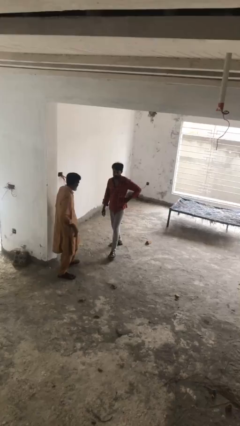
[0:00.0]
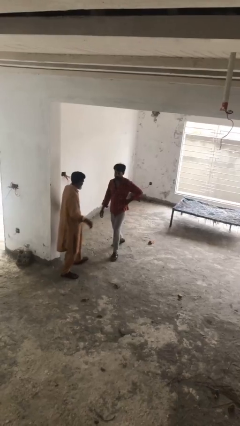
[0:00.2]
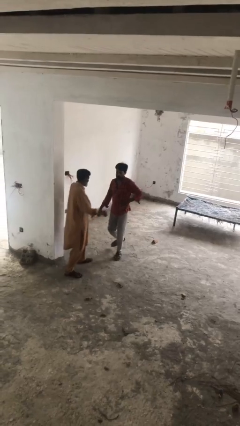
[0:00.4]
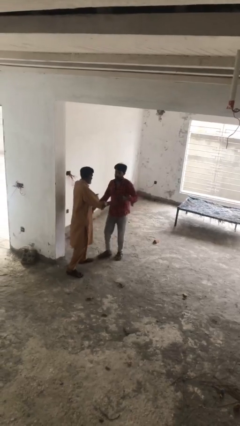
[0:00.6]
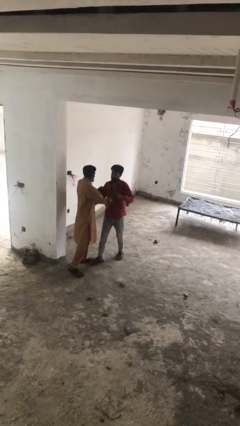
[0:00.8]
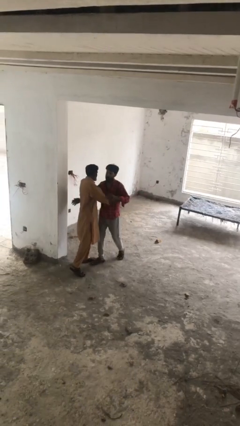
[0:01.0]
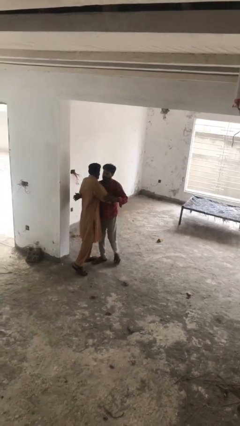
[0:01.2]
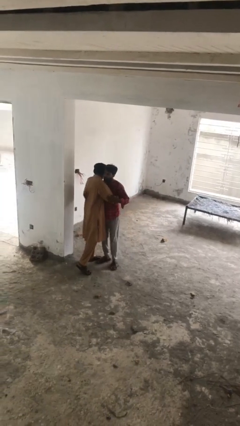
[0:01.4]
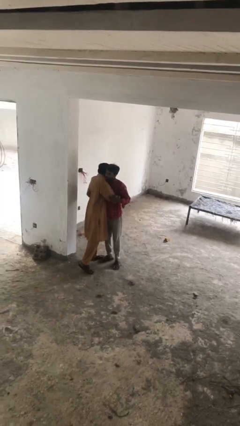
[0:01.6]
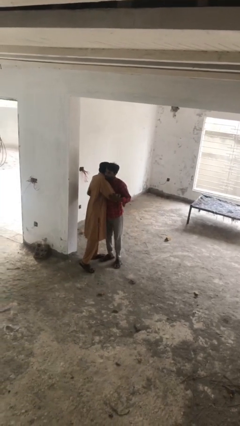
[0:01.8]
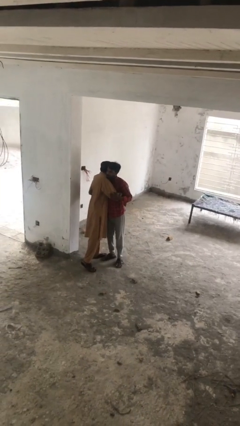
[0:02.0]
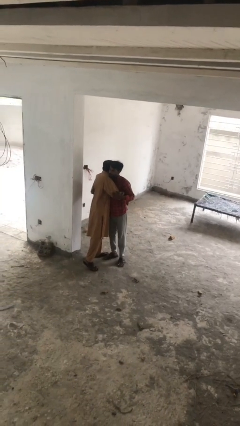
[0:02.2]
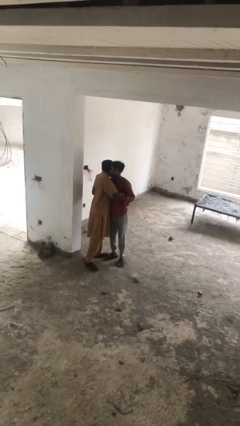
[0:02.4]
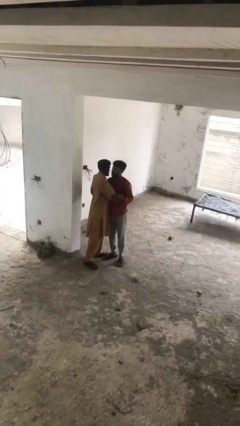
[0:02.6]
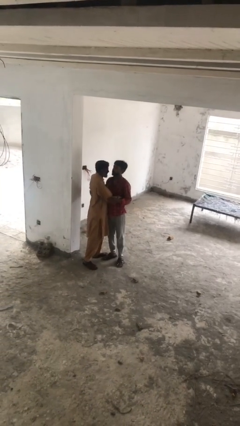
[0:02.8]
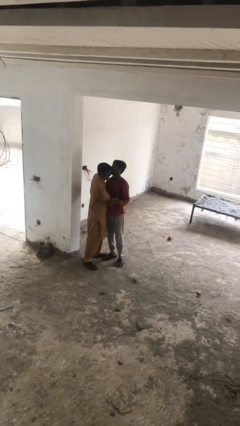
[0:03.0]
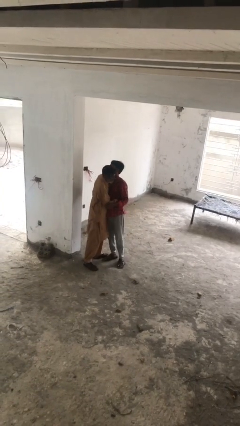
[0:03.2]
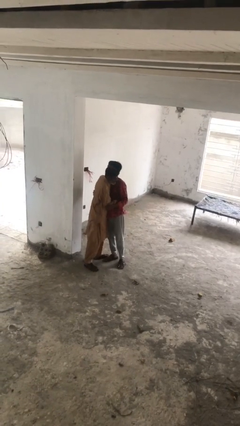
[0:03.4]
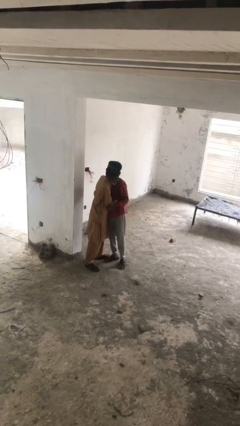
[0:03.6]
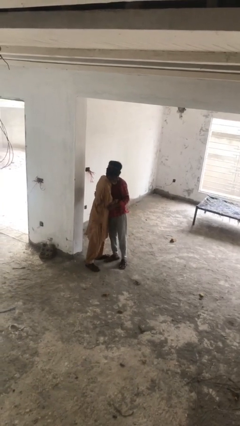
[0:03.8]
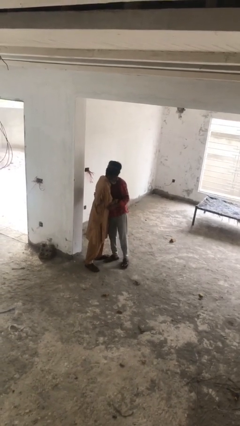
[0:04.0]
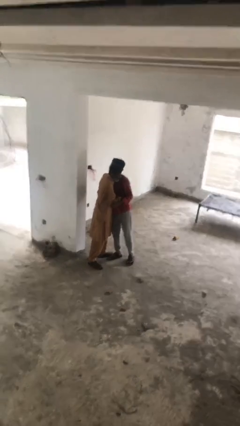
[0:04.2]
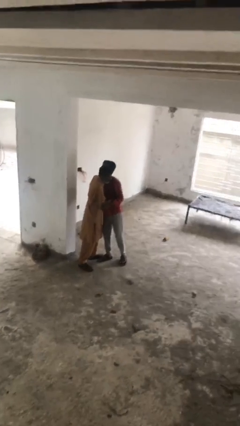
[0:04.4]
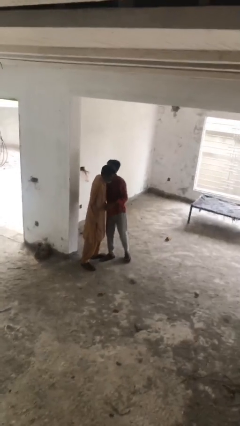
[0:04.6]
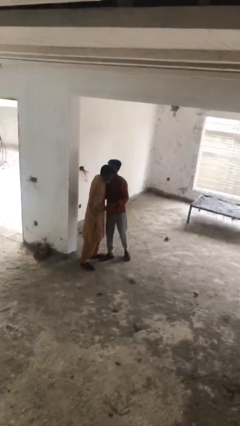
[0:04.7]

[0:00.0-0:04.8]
person embraces person

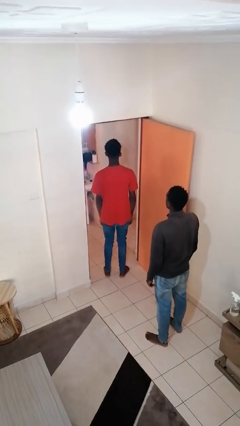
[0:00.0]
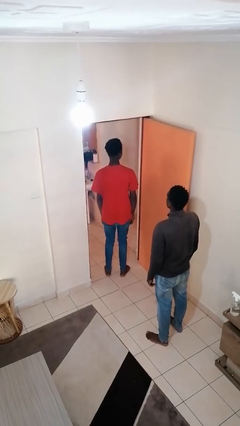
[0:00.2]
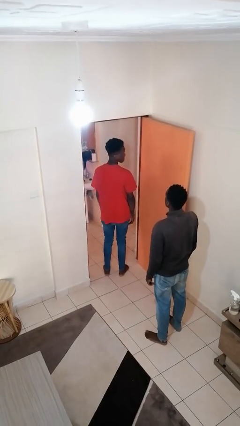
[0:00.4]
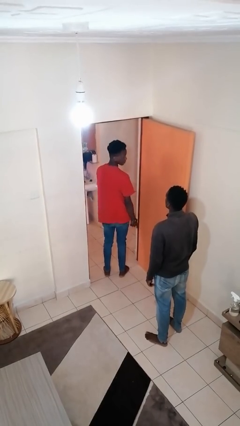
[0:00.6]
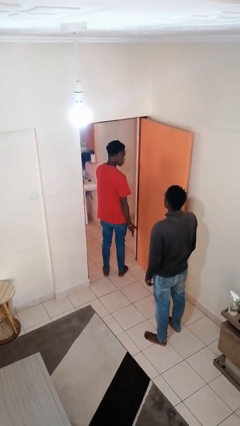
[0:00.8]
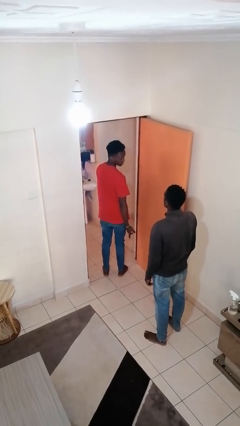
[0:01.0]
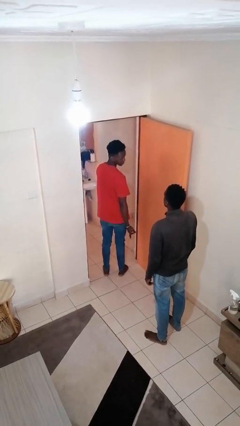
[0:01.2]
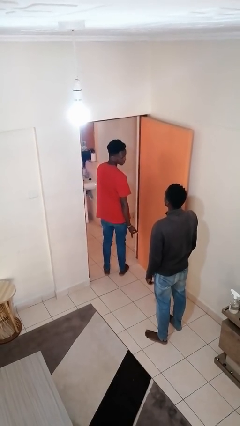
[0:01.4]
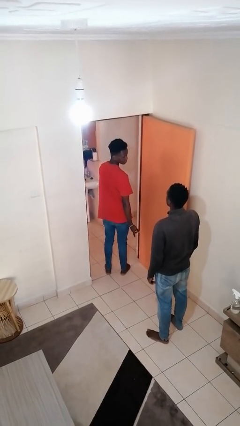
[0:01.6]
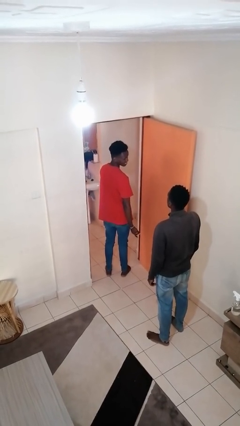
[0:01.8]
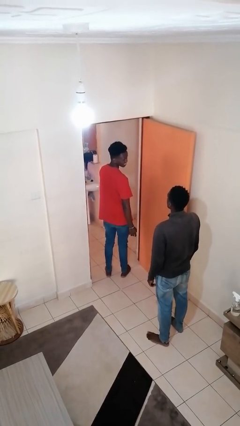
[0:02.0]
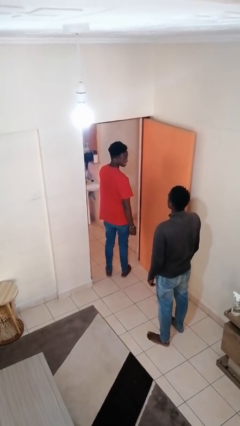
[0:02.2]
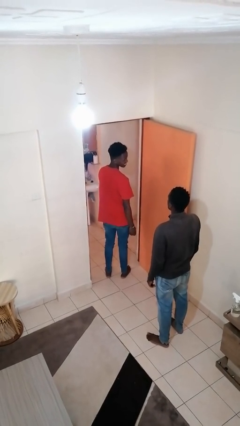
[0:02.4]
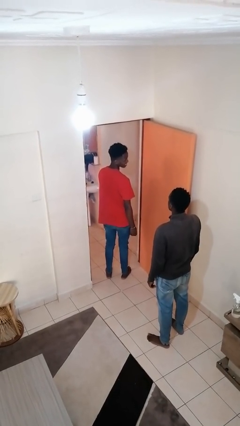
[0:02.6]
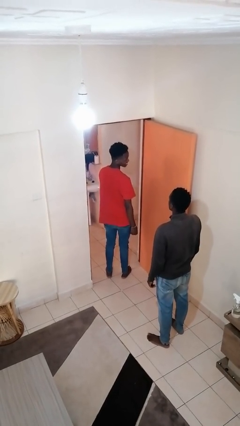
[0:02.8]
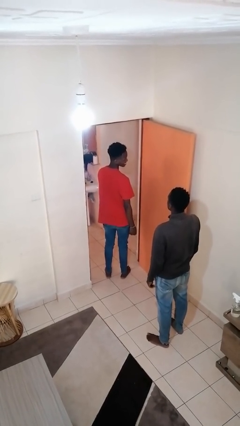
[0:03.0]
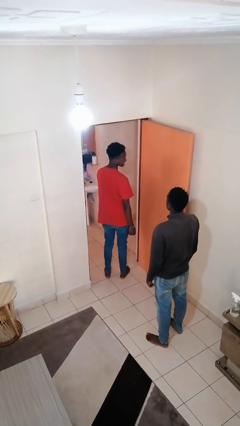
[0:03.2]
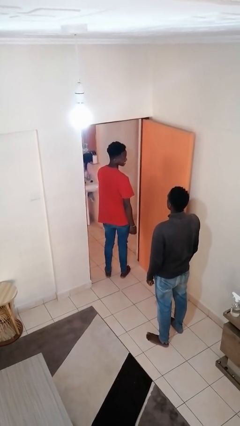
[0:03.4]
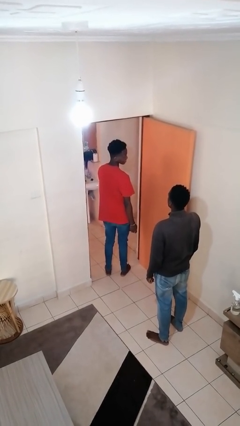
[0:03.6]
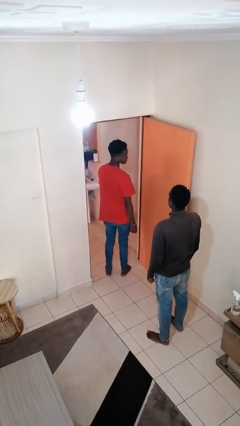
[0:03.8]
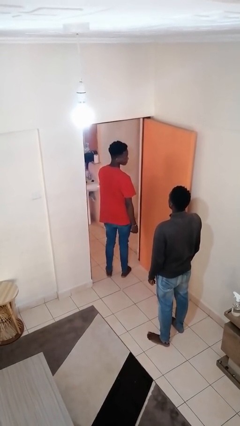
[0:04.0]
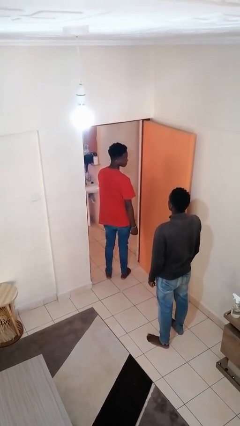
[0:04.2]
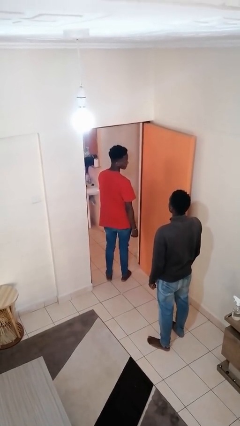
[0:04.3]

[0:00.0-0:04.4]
person looks over shoulder

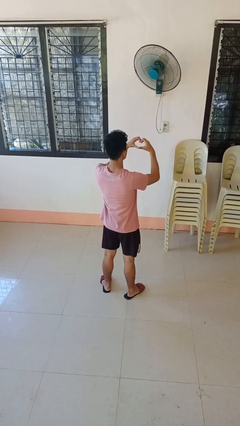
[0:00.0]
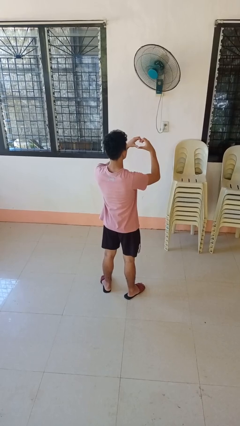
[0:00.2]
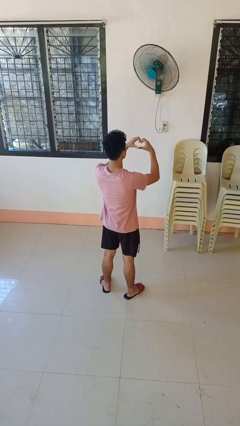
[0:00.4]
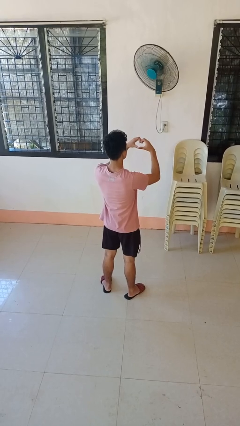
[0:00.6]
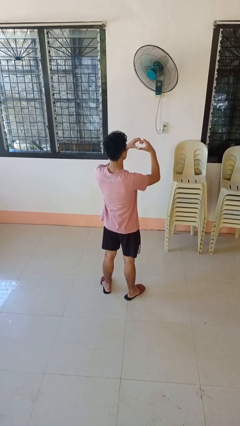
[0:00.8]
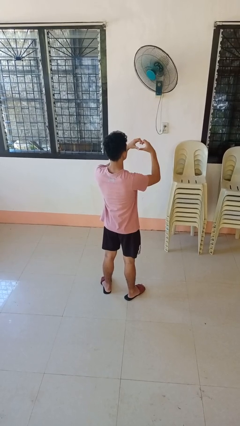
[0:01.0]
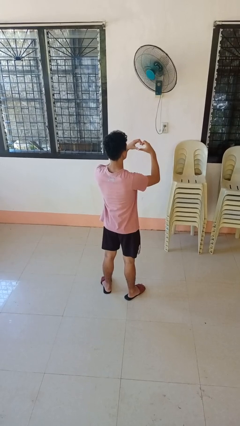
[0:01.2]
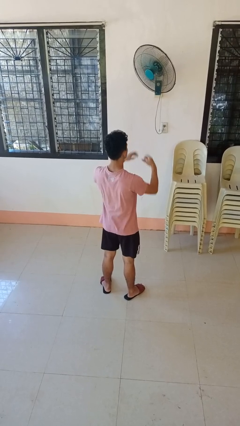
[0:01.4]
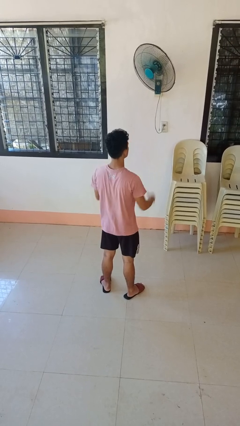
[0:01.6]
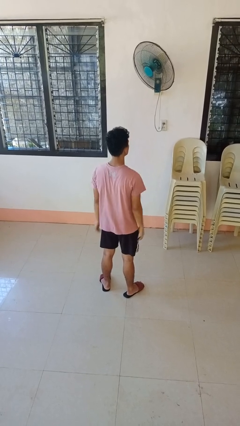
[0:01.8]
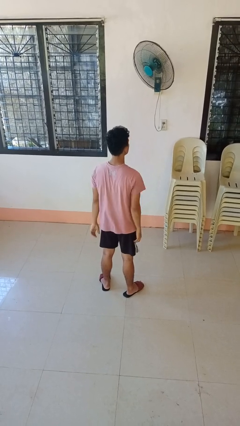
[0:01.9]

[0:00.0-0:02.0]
person gestures heart

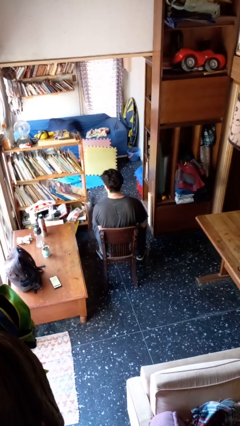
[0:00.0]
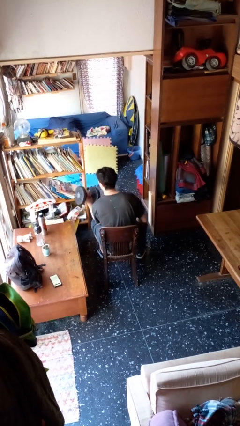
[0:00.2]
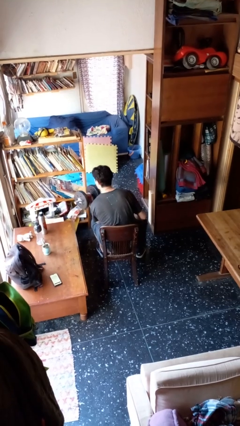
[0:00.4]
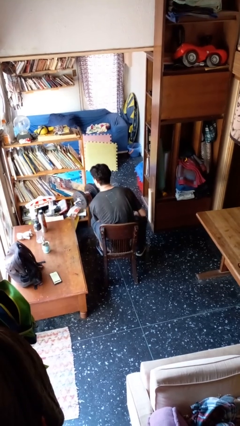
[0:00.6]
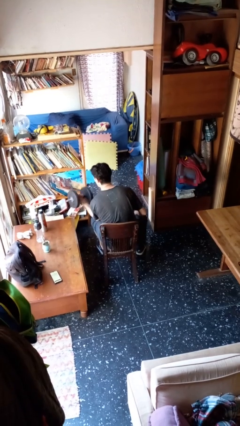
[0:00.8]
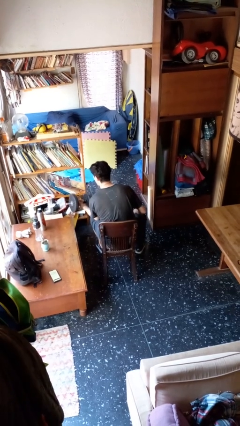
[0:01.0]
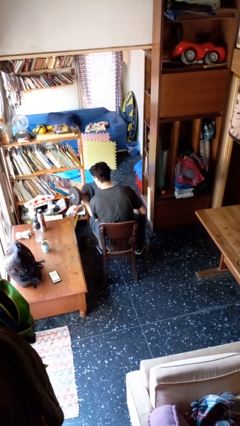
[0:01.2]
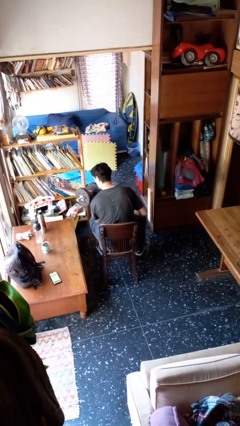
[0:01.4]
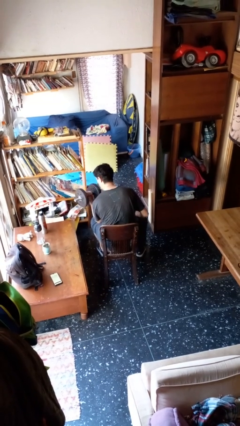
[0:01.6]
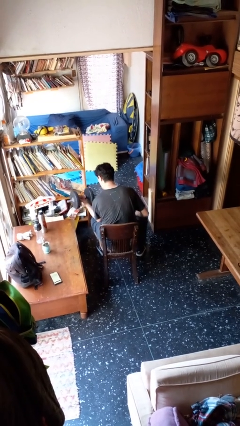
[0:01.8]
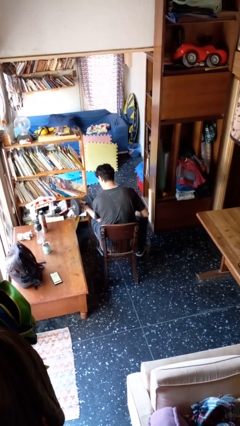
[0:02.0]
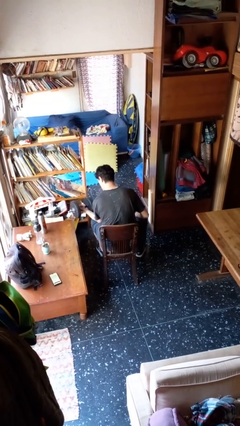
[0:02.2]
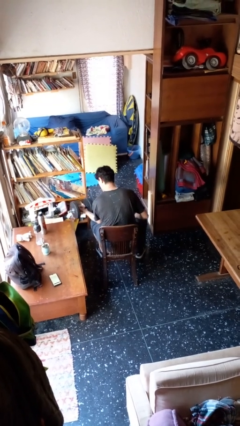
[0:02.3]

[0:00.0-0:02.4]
person lifts dumbbells

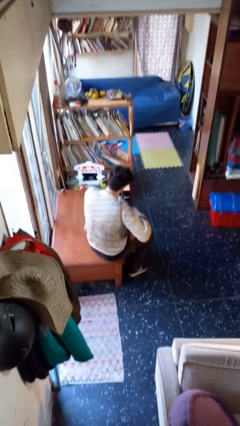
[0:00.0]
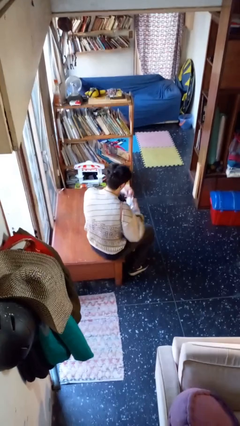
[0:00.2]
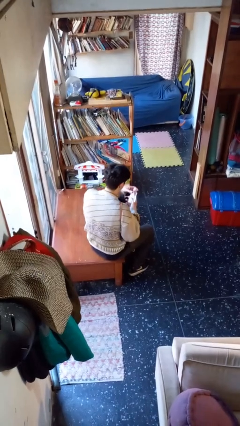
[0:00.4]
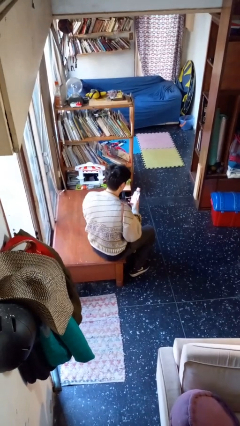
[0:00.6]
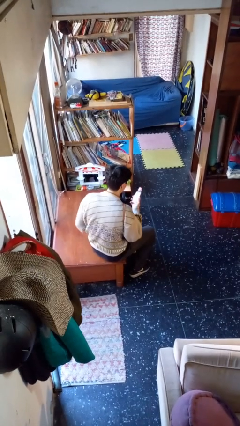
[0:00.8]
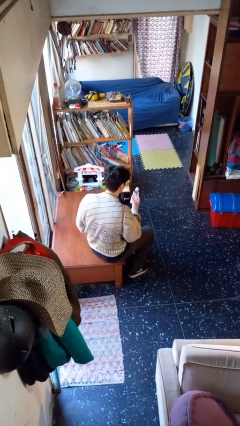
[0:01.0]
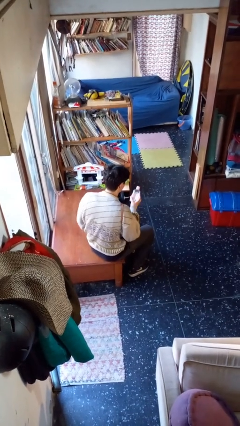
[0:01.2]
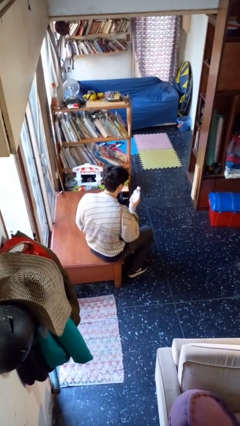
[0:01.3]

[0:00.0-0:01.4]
person takes object from purse

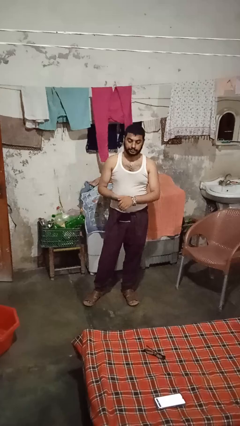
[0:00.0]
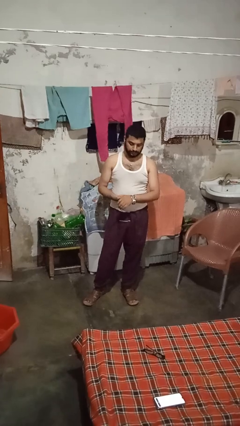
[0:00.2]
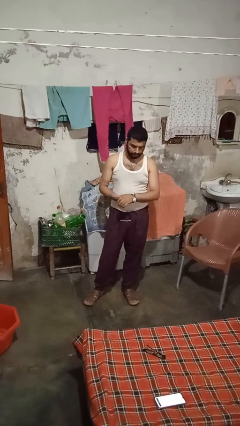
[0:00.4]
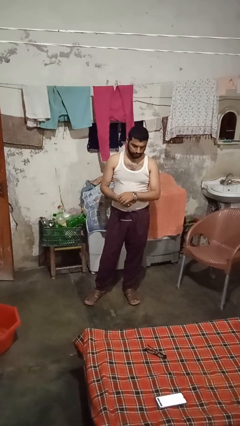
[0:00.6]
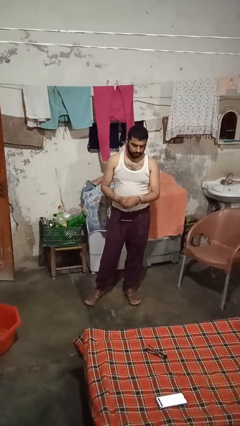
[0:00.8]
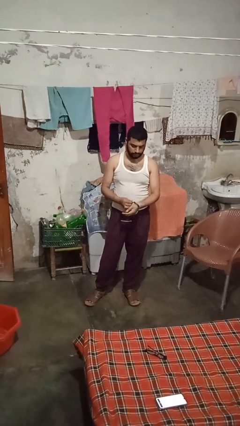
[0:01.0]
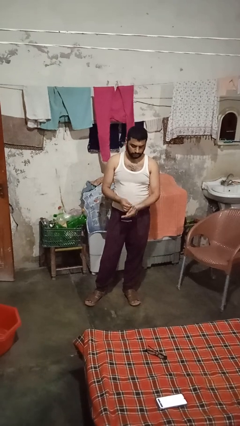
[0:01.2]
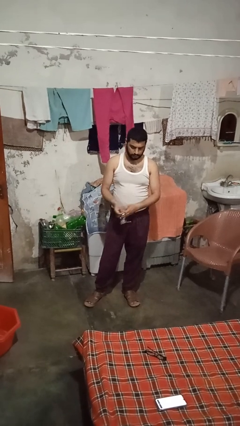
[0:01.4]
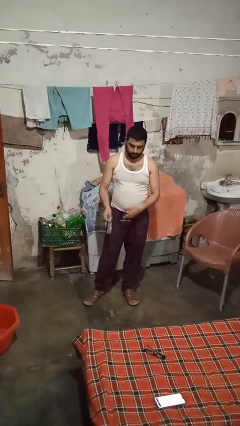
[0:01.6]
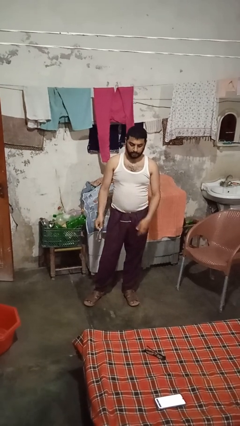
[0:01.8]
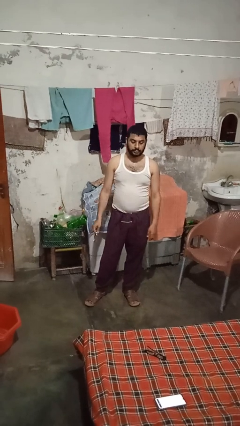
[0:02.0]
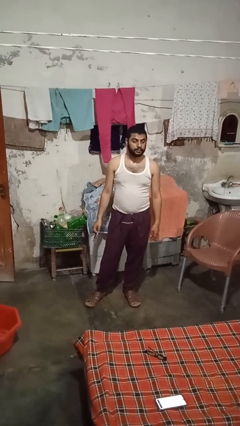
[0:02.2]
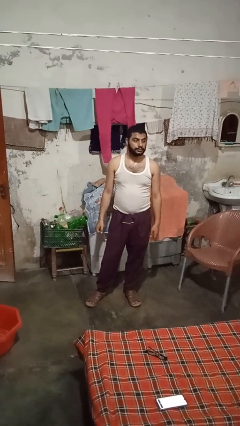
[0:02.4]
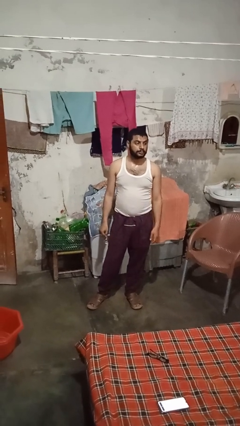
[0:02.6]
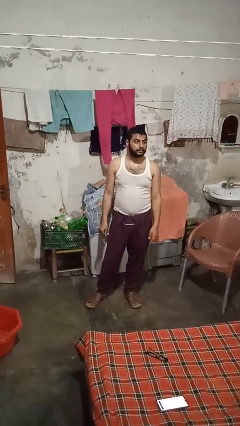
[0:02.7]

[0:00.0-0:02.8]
person takes off wristwatch
